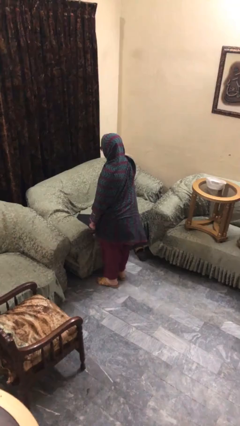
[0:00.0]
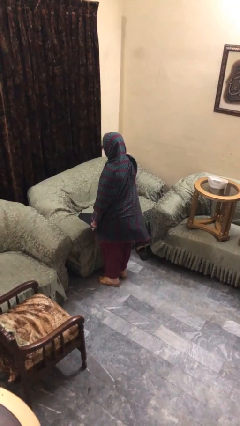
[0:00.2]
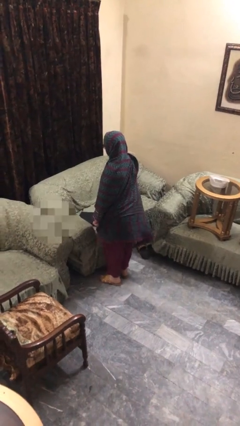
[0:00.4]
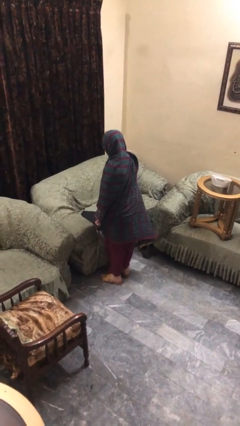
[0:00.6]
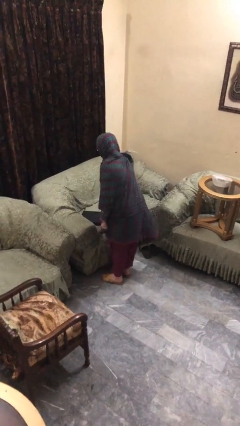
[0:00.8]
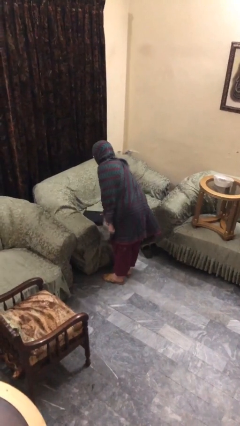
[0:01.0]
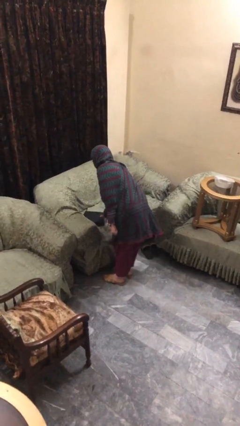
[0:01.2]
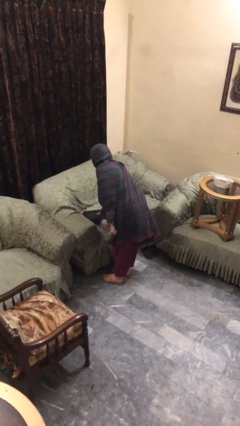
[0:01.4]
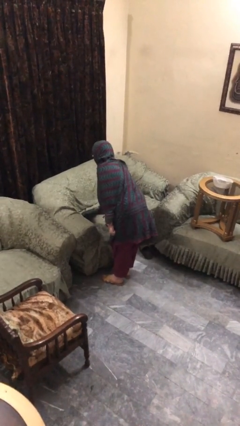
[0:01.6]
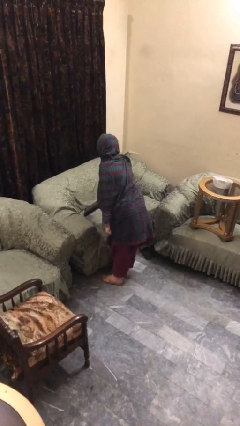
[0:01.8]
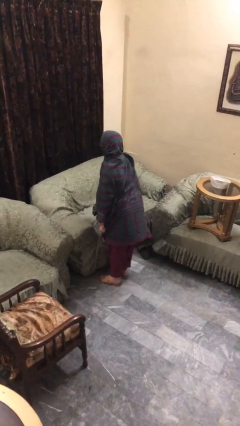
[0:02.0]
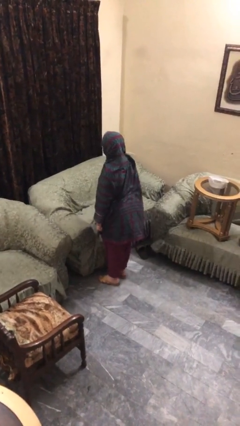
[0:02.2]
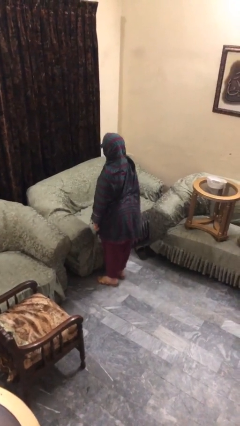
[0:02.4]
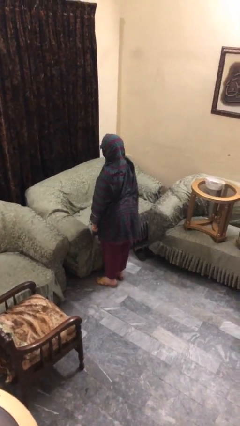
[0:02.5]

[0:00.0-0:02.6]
person picks up object from couch

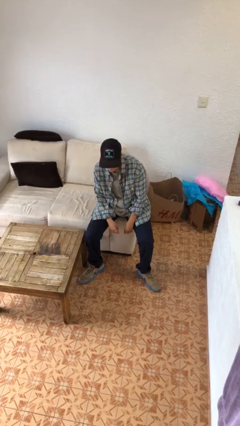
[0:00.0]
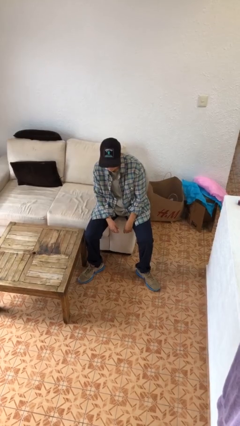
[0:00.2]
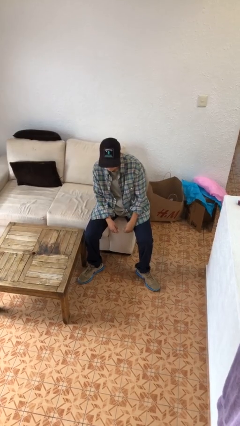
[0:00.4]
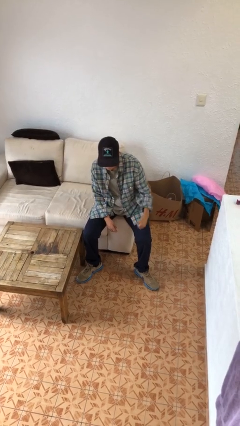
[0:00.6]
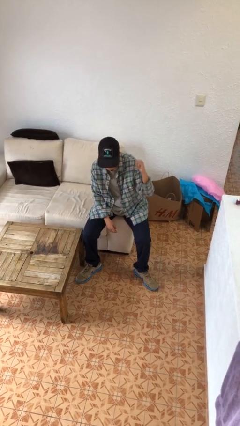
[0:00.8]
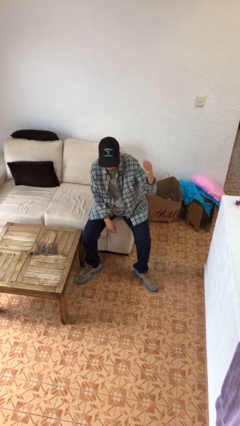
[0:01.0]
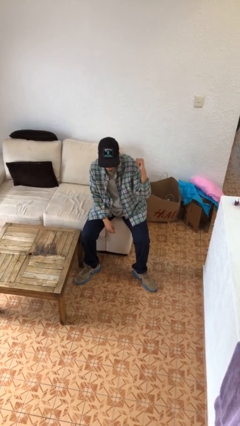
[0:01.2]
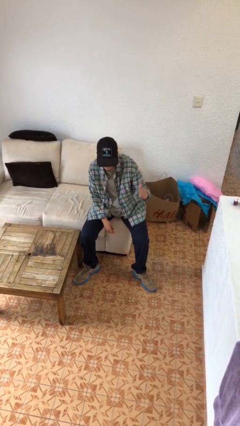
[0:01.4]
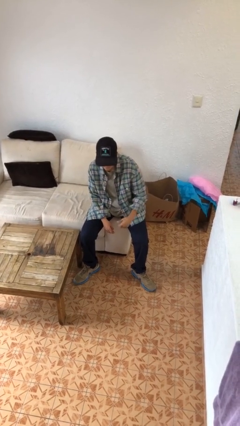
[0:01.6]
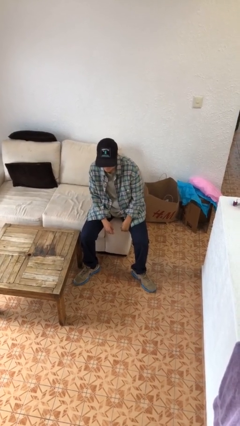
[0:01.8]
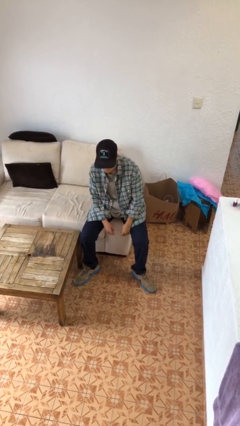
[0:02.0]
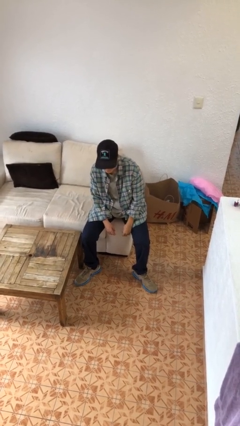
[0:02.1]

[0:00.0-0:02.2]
person gestures behind me

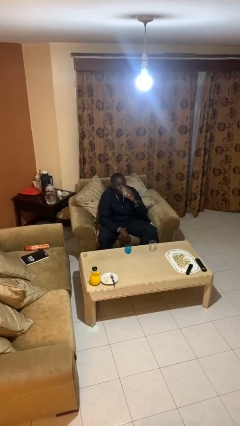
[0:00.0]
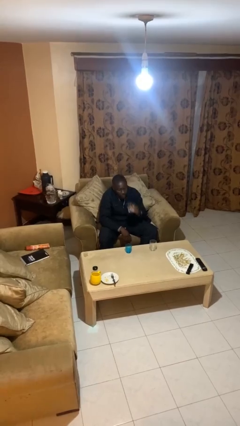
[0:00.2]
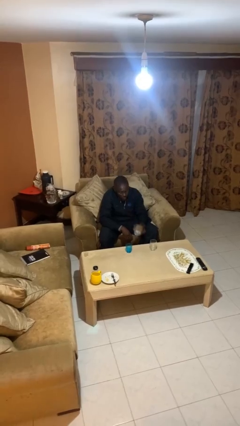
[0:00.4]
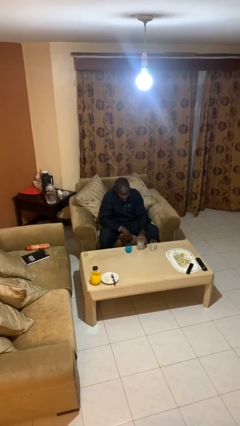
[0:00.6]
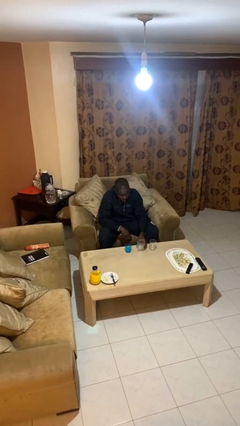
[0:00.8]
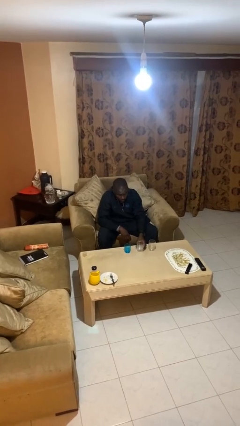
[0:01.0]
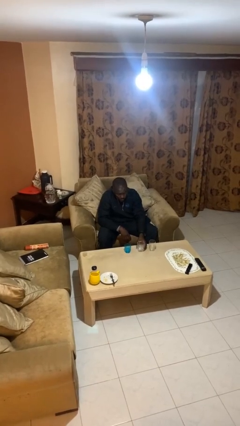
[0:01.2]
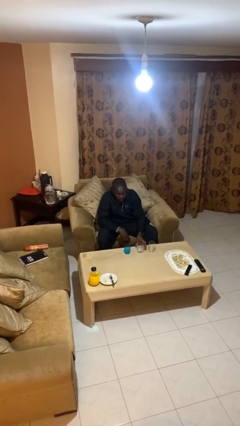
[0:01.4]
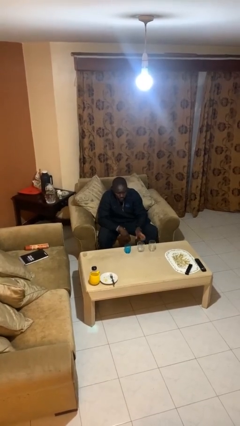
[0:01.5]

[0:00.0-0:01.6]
person puts down object on table

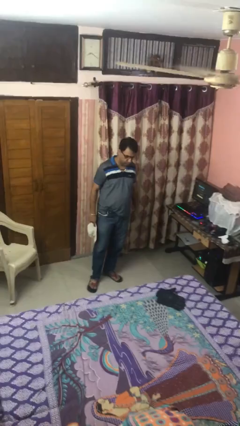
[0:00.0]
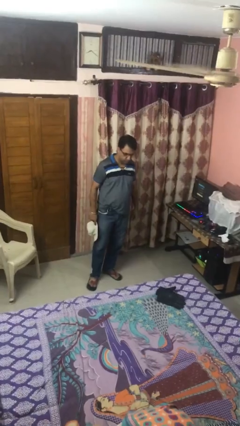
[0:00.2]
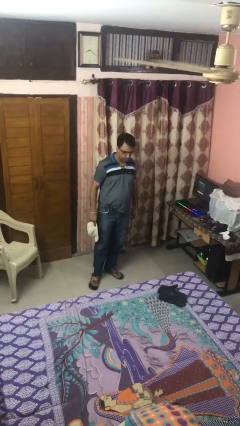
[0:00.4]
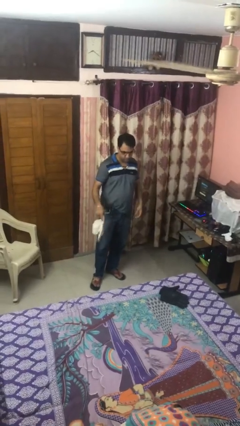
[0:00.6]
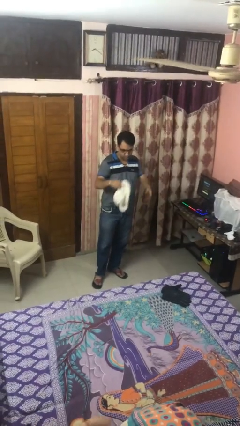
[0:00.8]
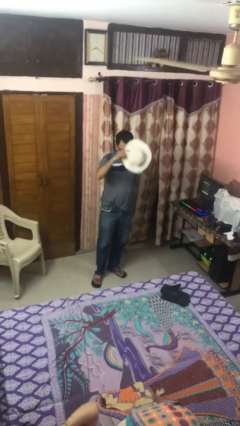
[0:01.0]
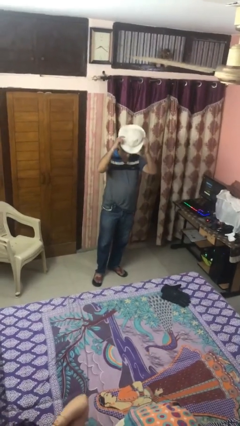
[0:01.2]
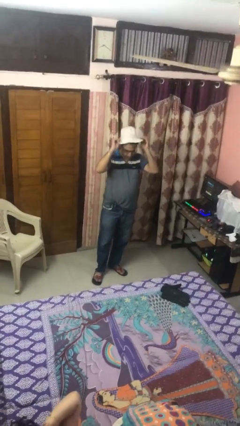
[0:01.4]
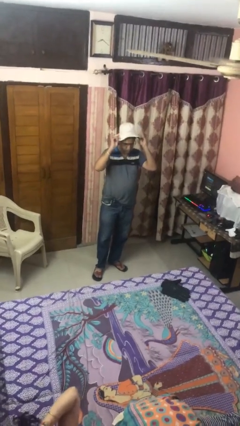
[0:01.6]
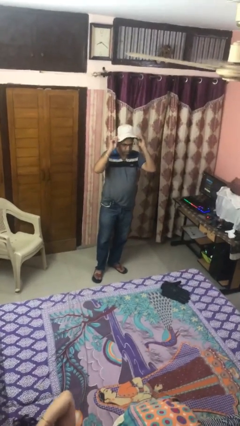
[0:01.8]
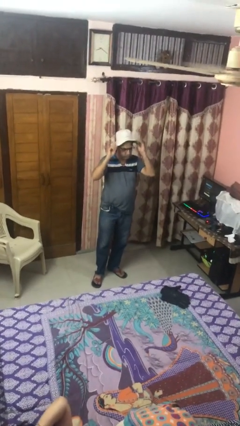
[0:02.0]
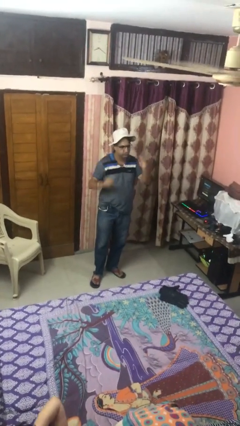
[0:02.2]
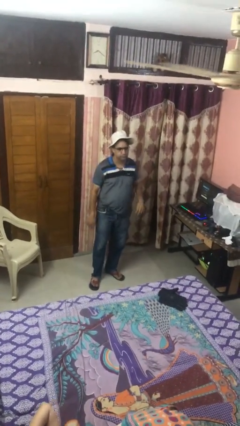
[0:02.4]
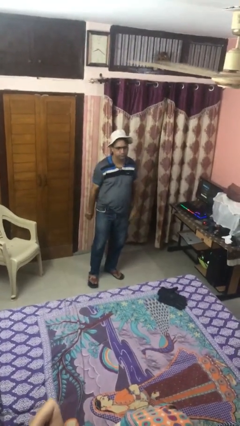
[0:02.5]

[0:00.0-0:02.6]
person puts on hat

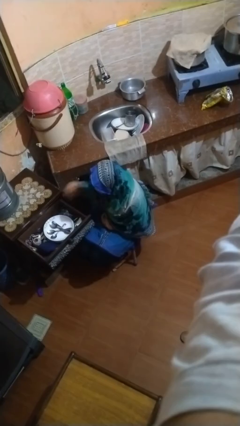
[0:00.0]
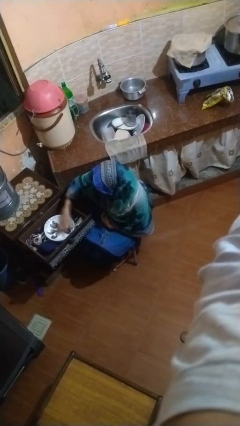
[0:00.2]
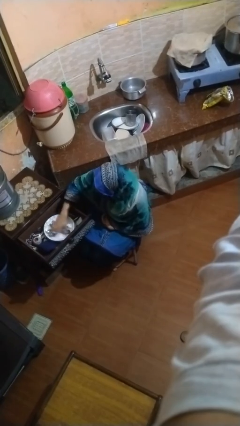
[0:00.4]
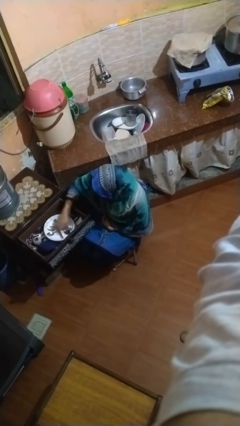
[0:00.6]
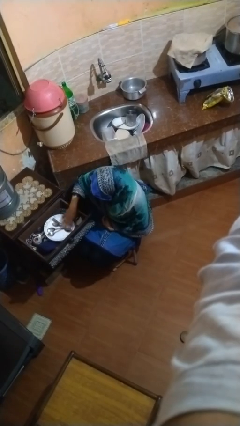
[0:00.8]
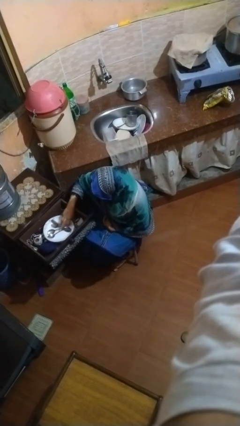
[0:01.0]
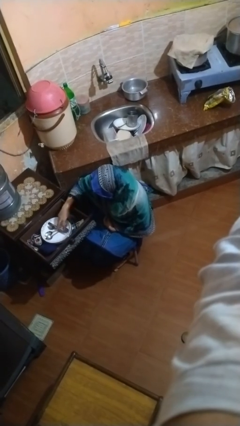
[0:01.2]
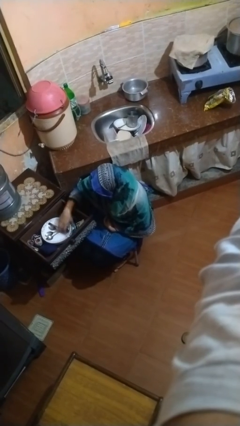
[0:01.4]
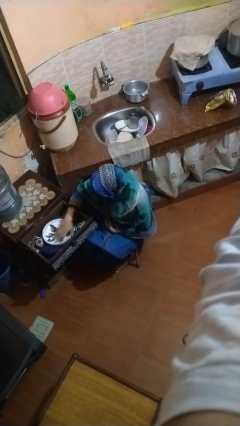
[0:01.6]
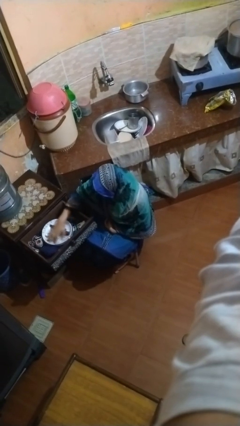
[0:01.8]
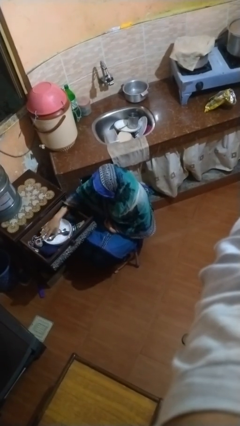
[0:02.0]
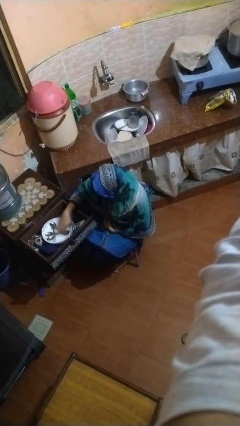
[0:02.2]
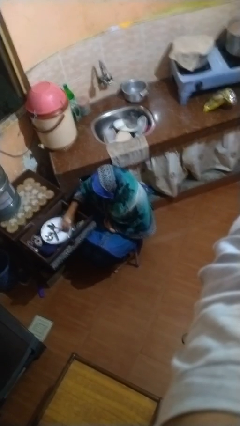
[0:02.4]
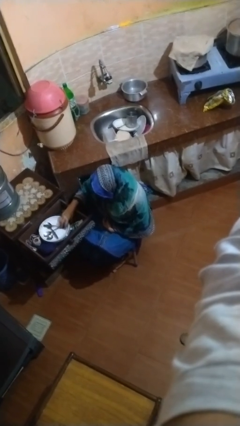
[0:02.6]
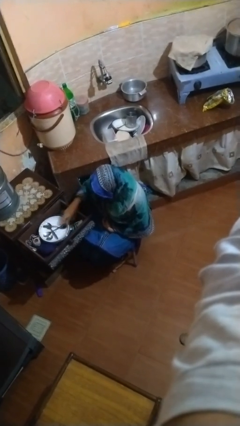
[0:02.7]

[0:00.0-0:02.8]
person searches in kitchen drawer

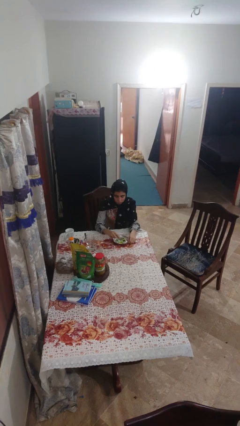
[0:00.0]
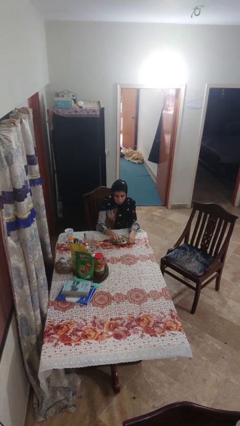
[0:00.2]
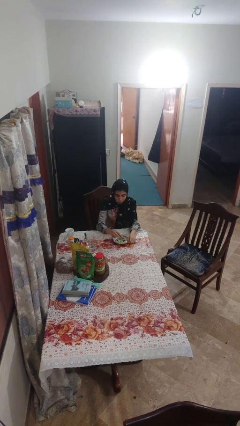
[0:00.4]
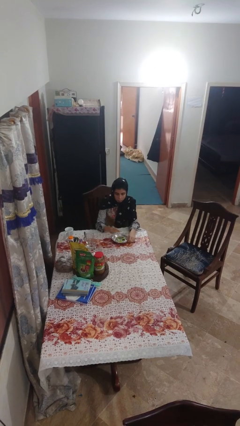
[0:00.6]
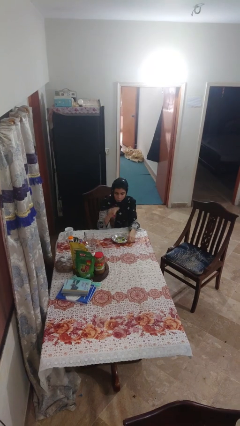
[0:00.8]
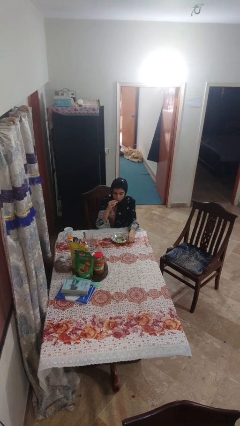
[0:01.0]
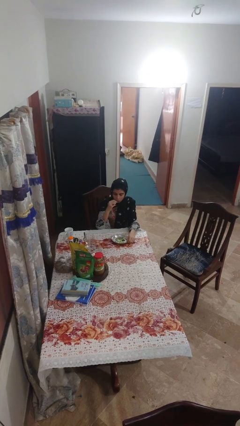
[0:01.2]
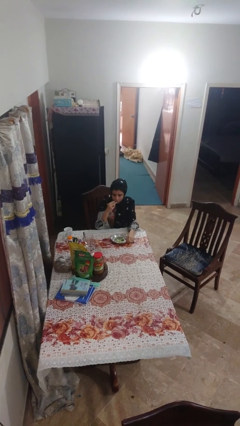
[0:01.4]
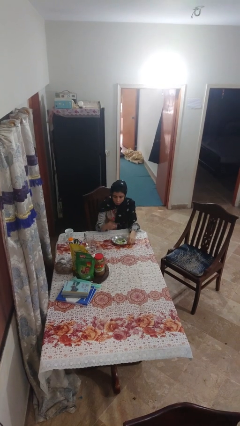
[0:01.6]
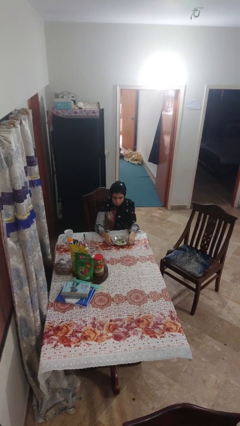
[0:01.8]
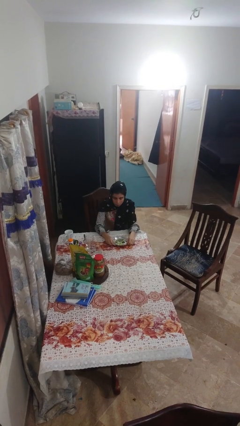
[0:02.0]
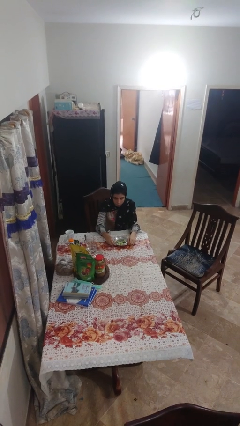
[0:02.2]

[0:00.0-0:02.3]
person eats with hands

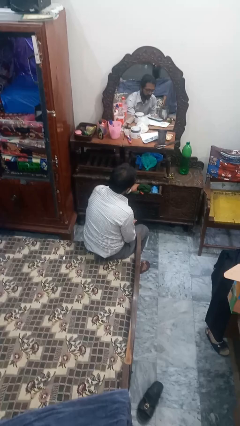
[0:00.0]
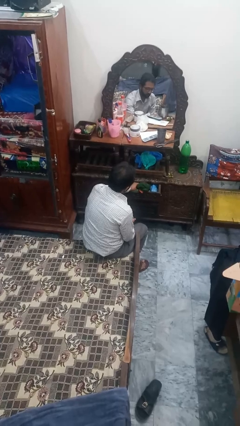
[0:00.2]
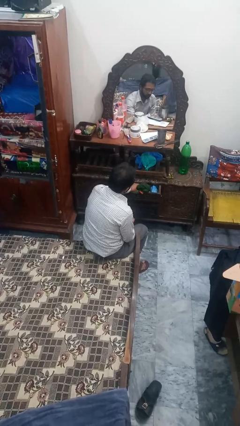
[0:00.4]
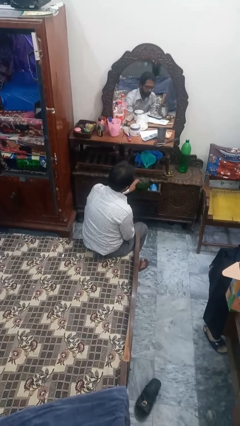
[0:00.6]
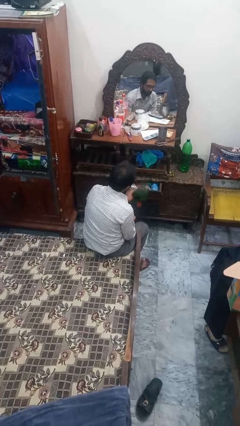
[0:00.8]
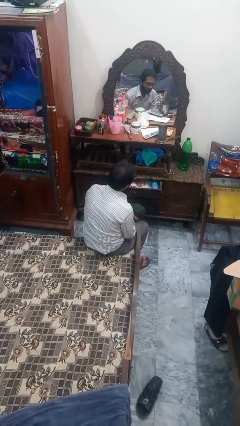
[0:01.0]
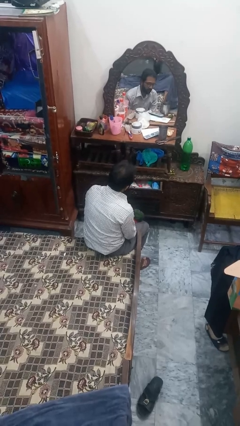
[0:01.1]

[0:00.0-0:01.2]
person takes clothes from dresser

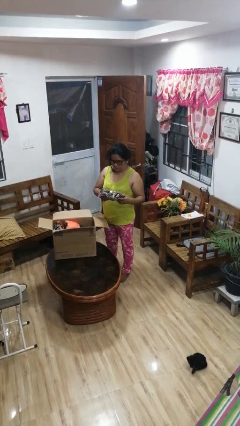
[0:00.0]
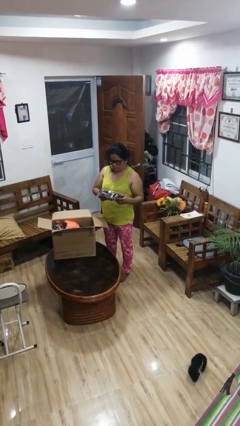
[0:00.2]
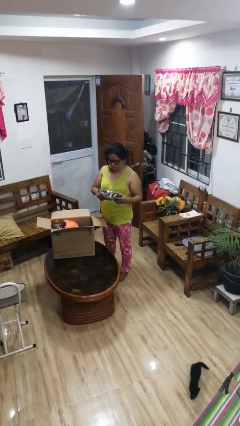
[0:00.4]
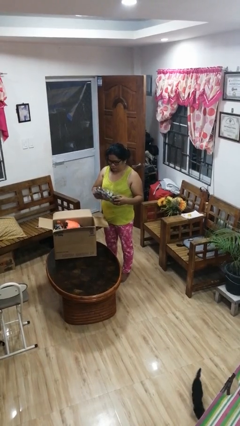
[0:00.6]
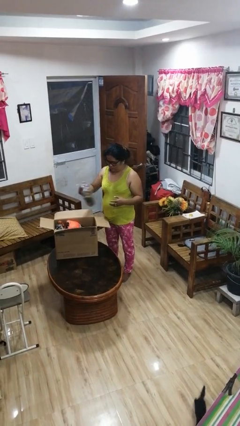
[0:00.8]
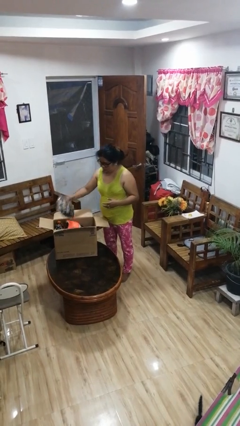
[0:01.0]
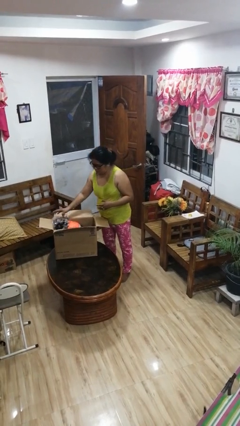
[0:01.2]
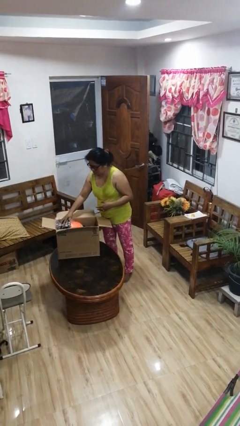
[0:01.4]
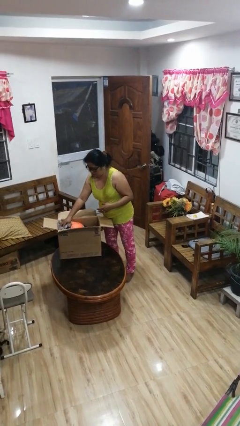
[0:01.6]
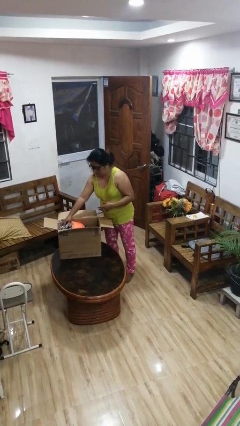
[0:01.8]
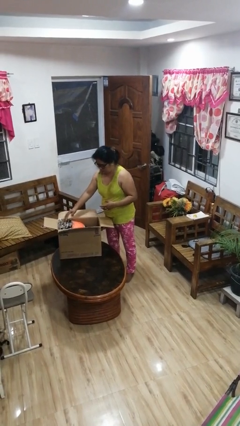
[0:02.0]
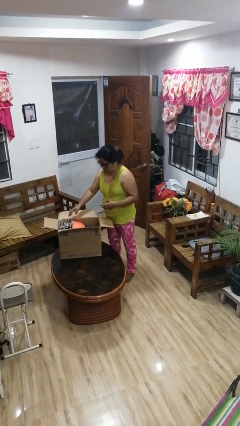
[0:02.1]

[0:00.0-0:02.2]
person puts object into box
